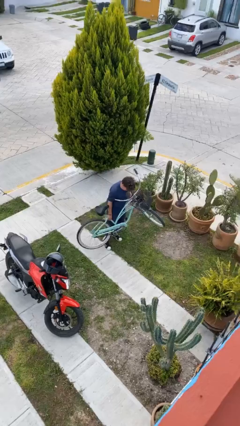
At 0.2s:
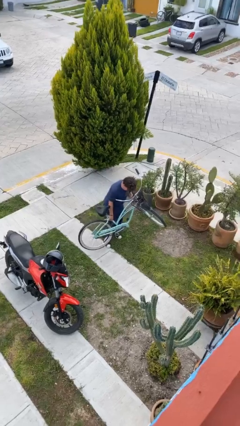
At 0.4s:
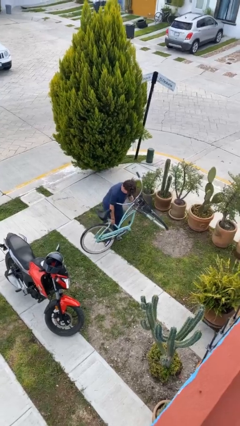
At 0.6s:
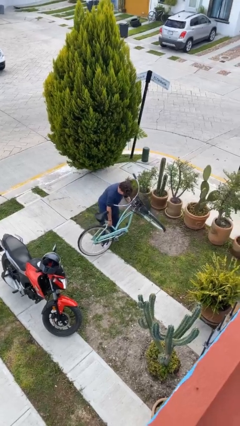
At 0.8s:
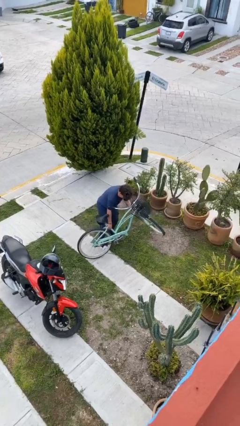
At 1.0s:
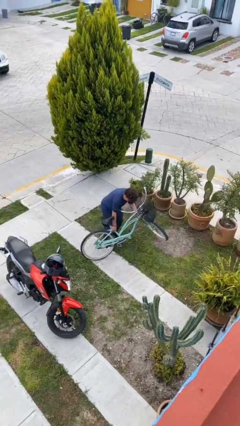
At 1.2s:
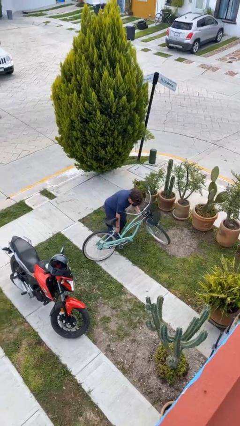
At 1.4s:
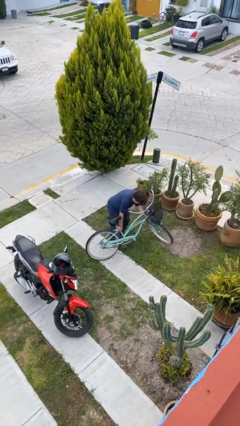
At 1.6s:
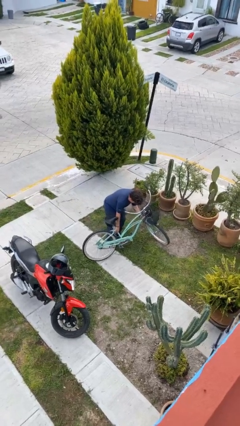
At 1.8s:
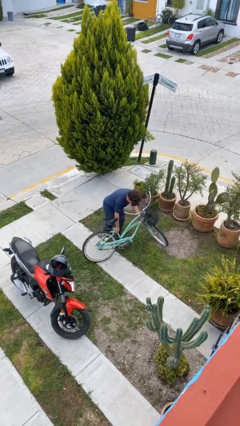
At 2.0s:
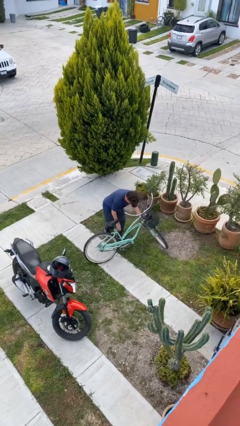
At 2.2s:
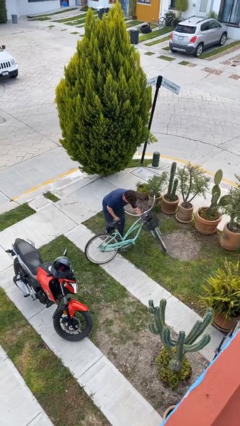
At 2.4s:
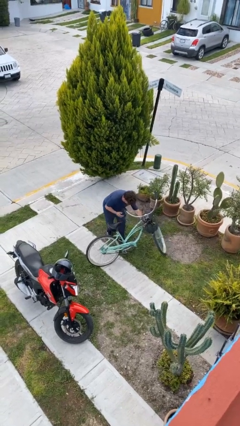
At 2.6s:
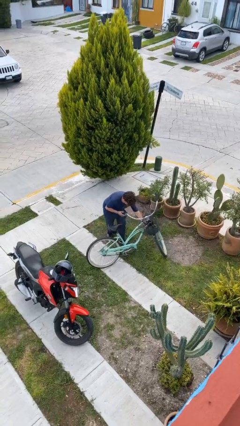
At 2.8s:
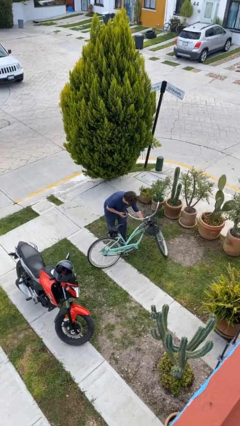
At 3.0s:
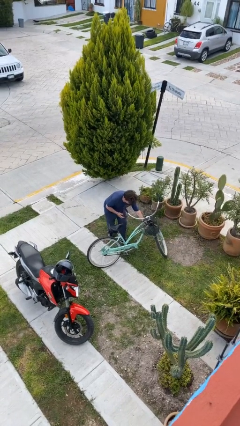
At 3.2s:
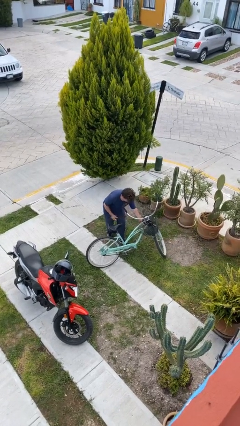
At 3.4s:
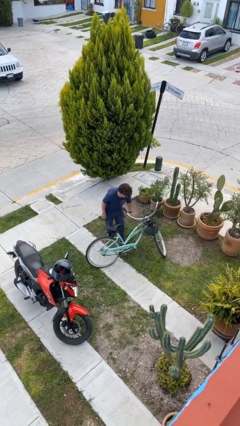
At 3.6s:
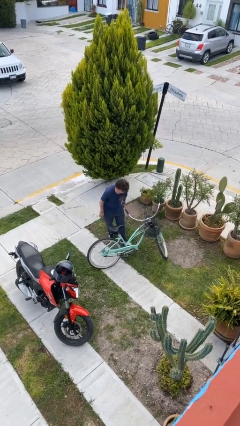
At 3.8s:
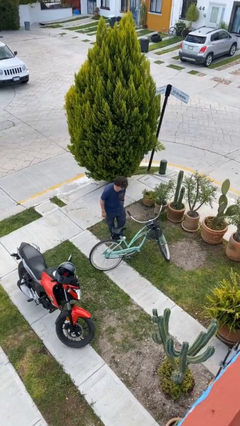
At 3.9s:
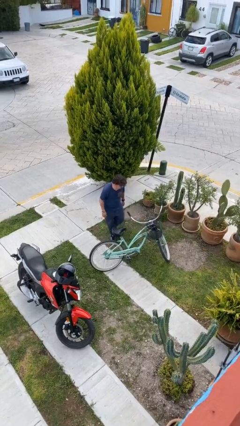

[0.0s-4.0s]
person puts down object on floor

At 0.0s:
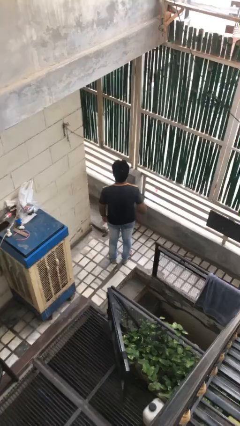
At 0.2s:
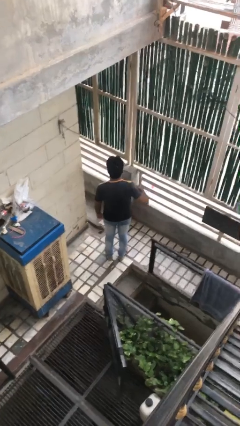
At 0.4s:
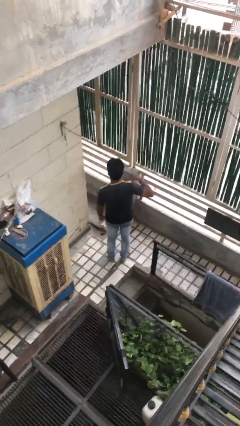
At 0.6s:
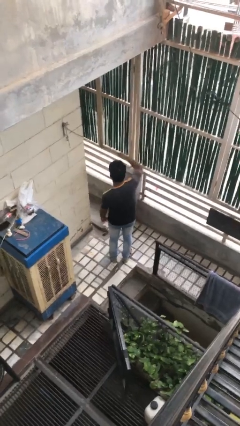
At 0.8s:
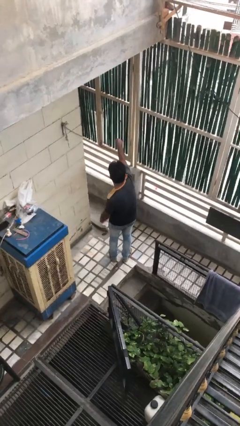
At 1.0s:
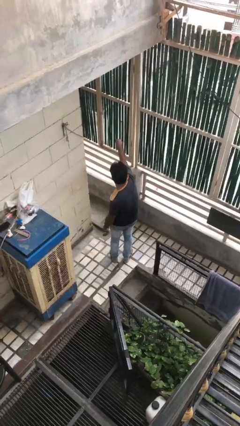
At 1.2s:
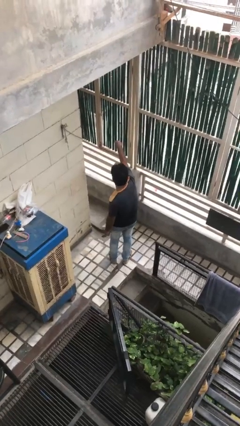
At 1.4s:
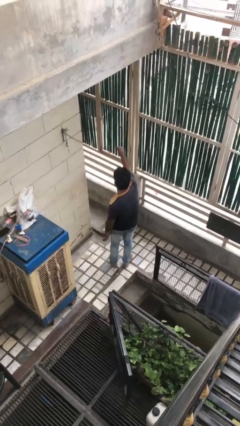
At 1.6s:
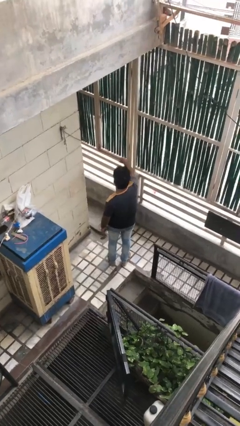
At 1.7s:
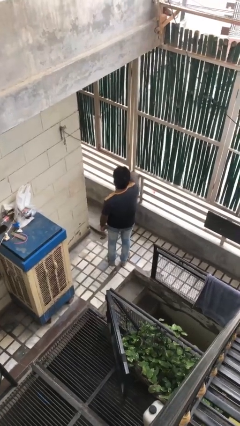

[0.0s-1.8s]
person punches

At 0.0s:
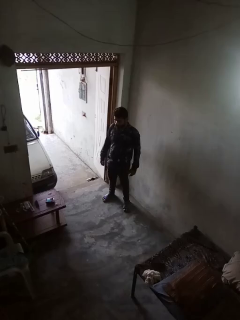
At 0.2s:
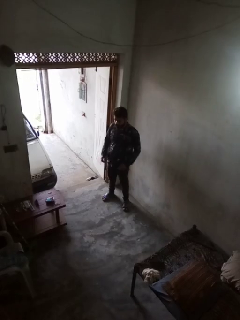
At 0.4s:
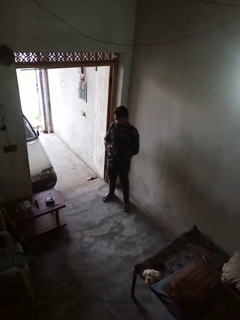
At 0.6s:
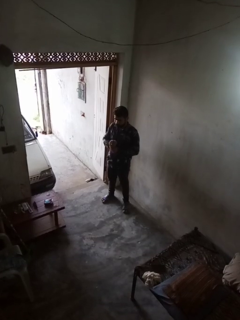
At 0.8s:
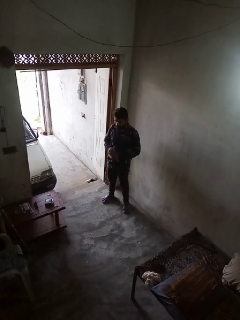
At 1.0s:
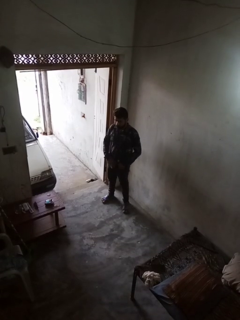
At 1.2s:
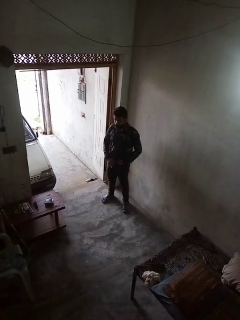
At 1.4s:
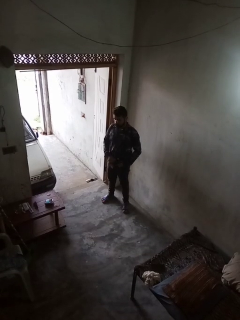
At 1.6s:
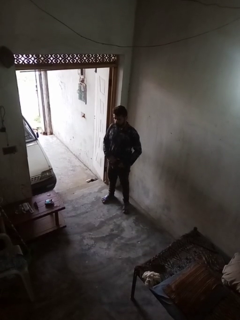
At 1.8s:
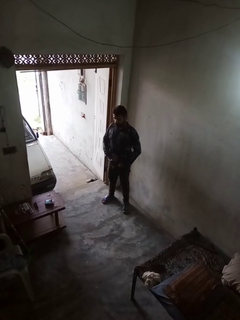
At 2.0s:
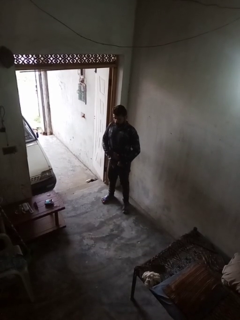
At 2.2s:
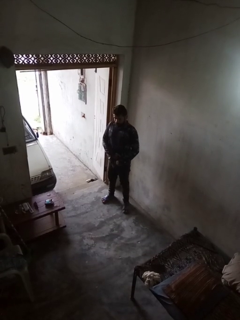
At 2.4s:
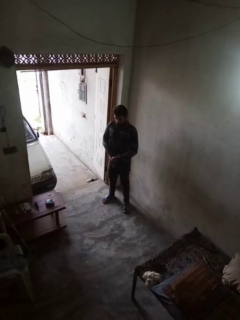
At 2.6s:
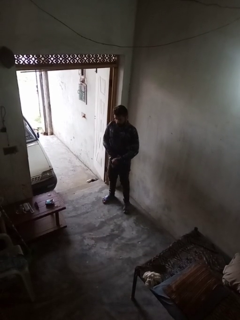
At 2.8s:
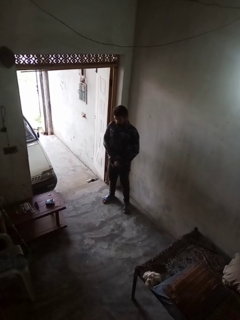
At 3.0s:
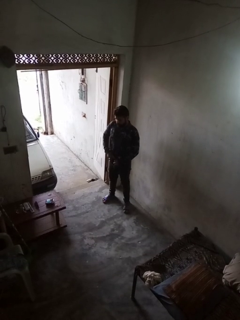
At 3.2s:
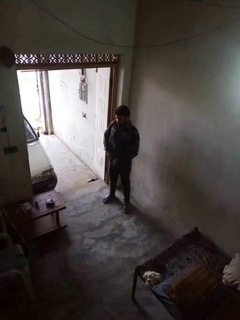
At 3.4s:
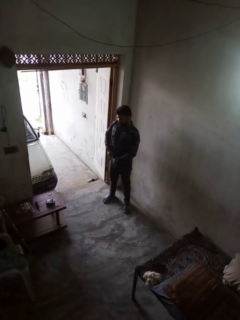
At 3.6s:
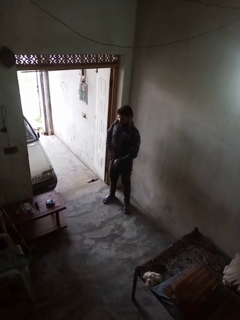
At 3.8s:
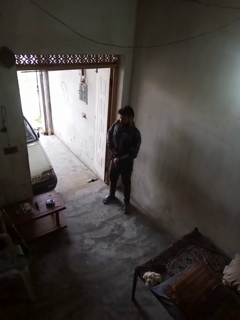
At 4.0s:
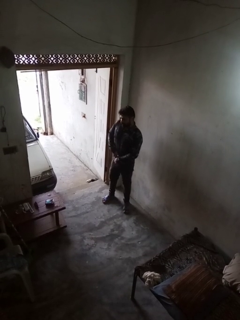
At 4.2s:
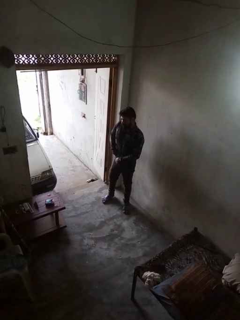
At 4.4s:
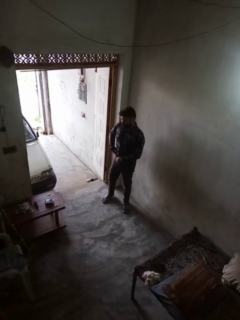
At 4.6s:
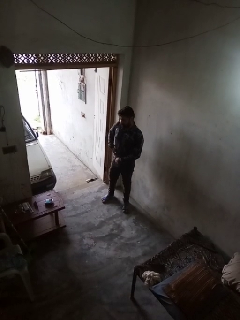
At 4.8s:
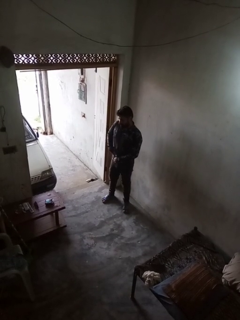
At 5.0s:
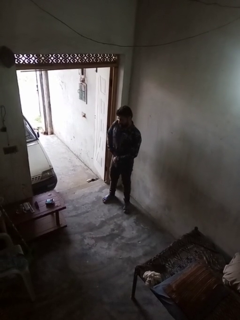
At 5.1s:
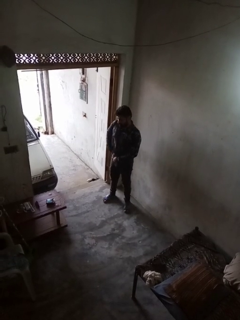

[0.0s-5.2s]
person tucks in shirt

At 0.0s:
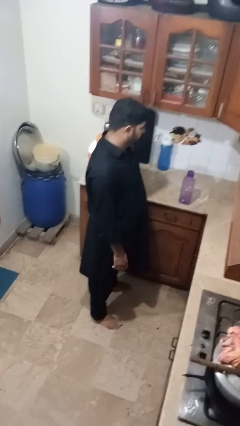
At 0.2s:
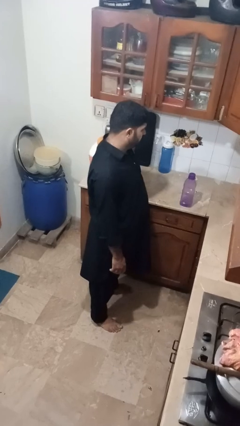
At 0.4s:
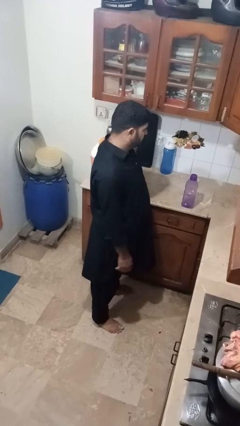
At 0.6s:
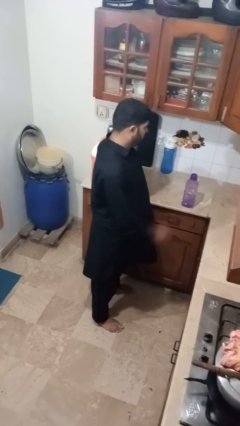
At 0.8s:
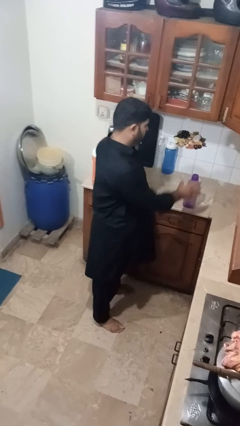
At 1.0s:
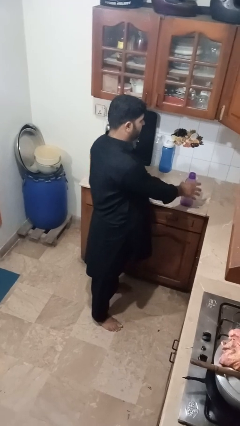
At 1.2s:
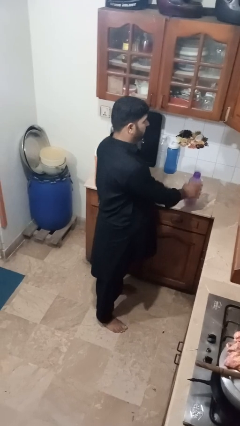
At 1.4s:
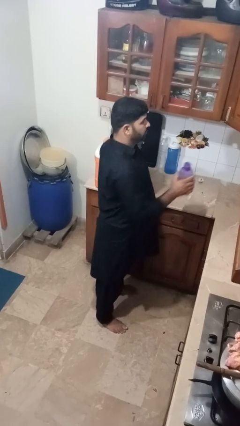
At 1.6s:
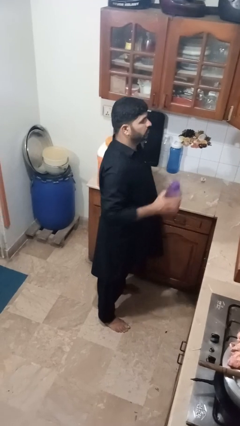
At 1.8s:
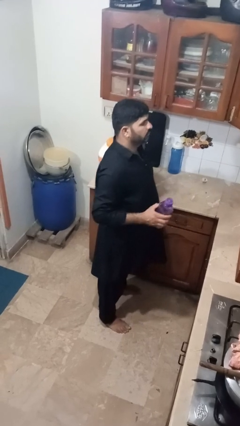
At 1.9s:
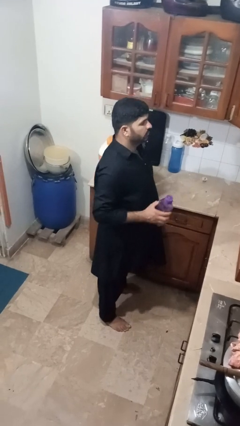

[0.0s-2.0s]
person picks up object from countertop

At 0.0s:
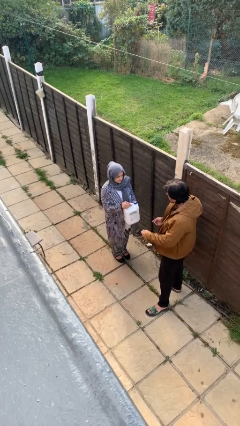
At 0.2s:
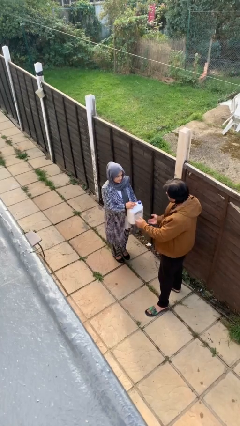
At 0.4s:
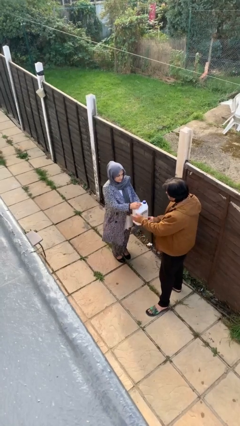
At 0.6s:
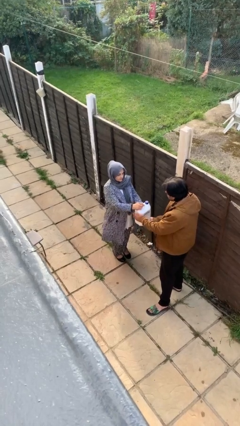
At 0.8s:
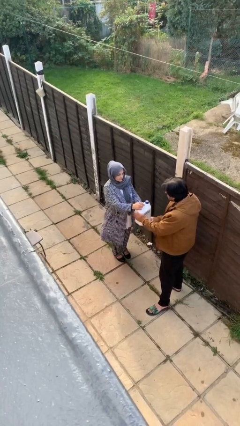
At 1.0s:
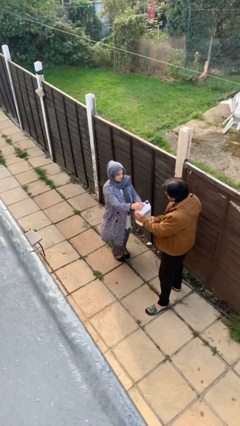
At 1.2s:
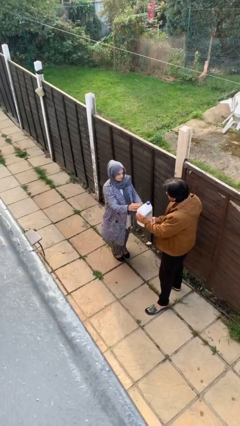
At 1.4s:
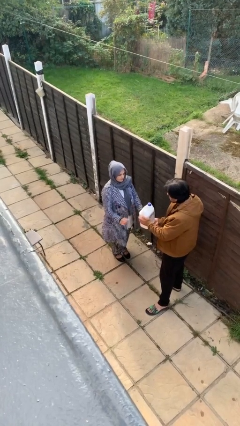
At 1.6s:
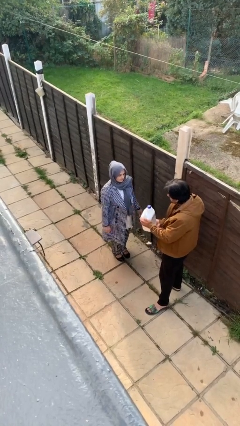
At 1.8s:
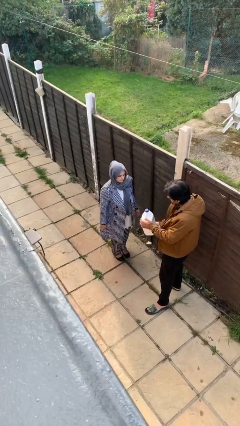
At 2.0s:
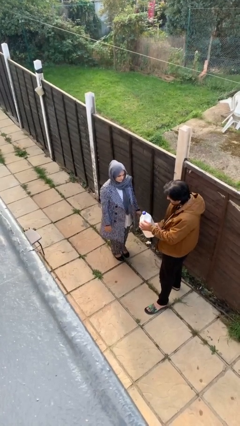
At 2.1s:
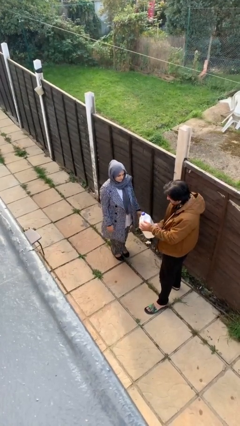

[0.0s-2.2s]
person transfers object to person

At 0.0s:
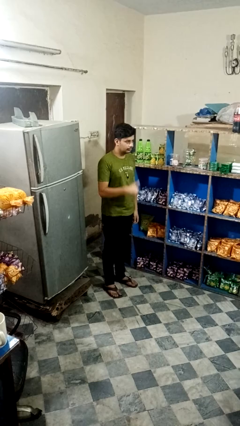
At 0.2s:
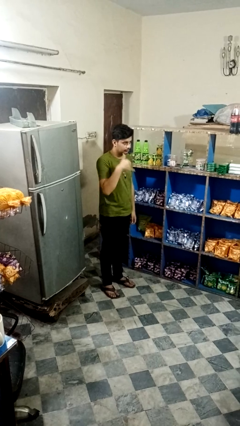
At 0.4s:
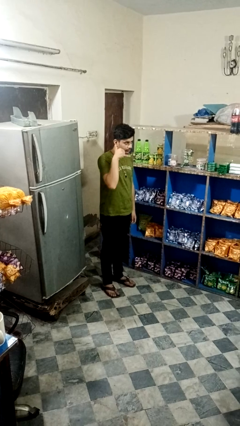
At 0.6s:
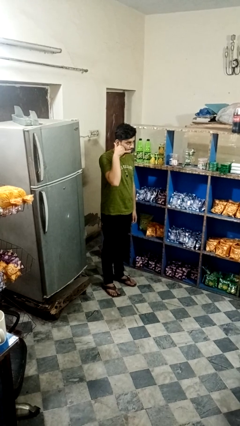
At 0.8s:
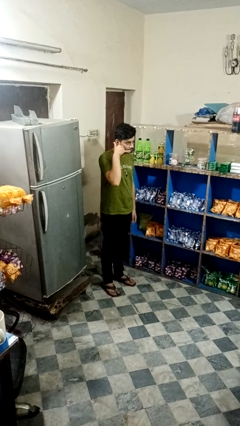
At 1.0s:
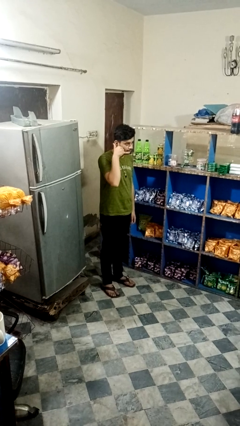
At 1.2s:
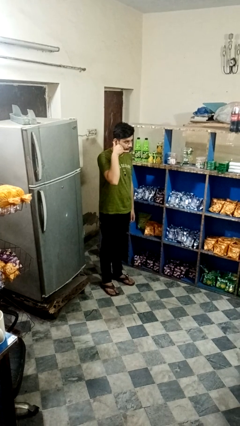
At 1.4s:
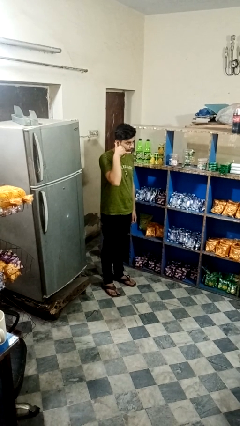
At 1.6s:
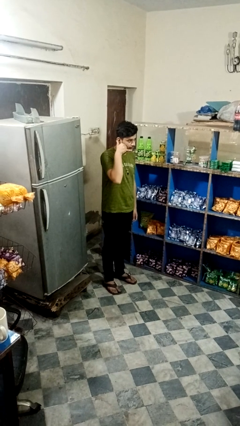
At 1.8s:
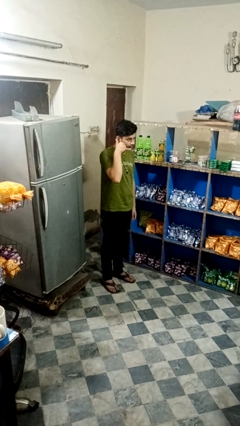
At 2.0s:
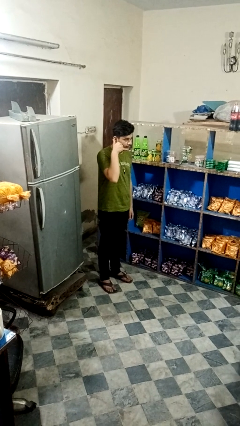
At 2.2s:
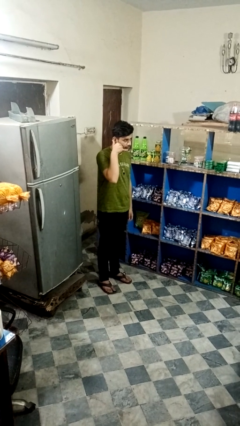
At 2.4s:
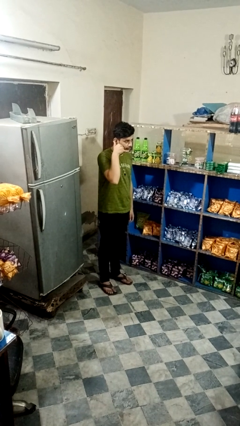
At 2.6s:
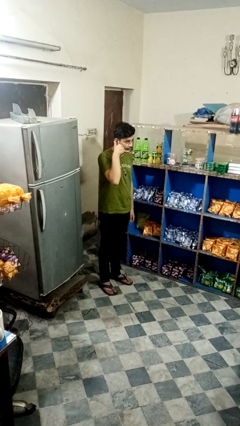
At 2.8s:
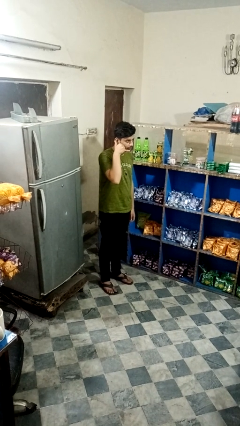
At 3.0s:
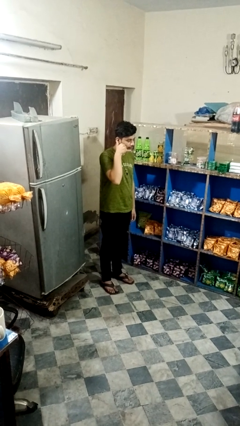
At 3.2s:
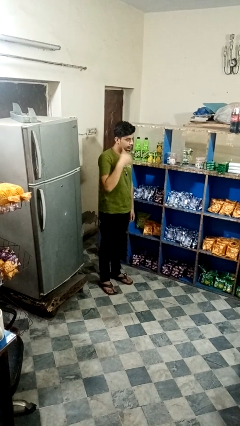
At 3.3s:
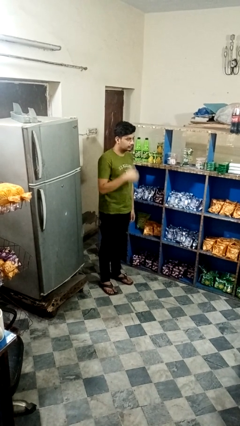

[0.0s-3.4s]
person gestures heart
